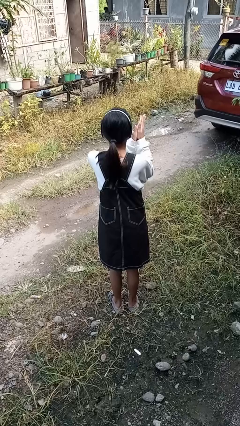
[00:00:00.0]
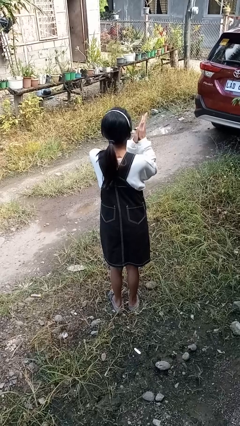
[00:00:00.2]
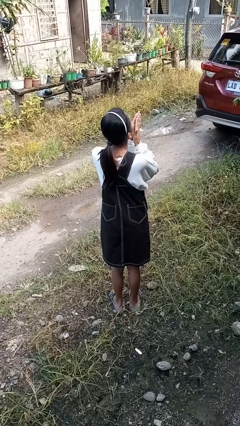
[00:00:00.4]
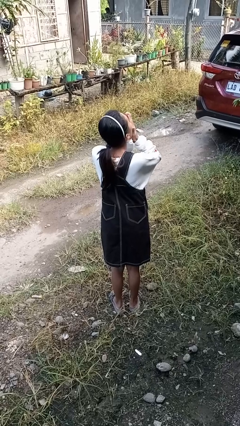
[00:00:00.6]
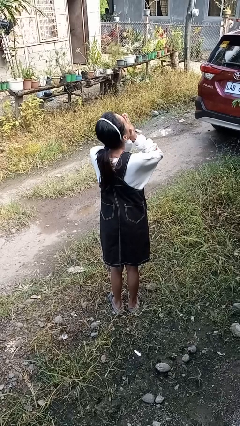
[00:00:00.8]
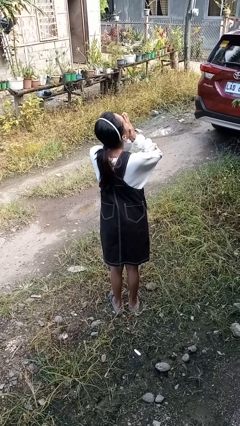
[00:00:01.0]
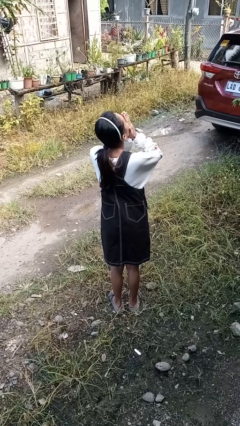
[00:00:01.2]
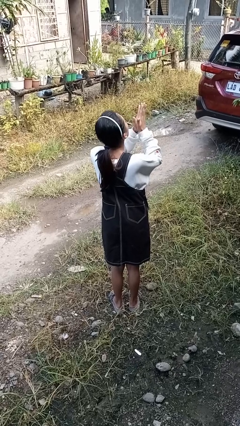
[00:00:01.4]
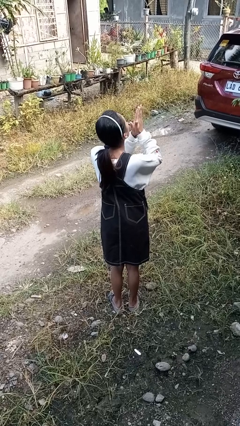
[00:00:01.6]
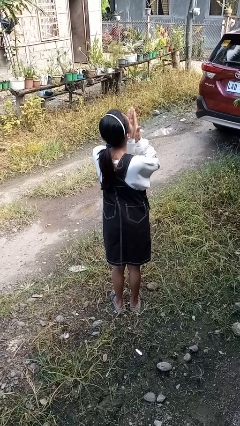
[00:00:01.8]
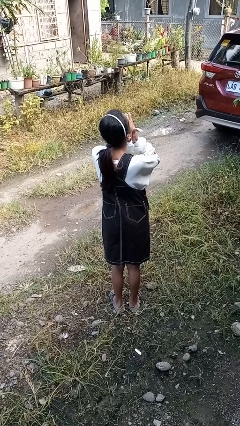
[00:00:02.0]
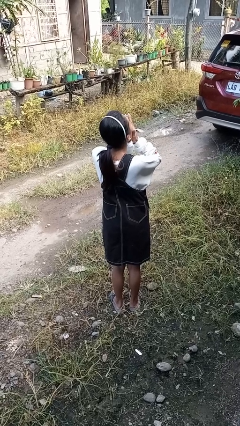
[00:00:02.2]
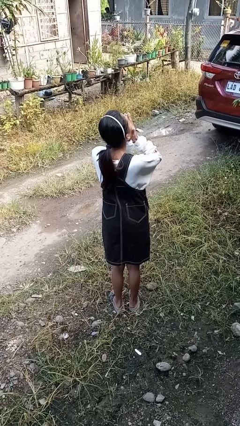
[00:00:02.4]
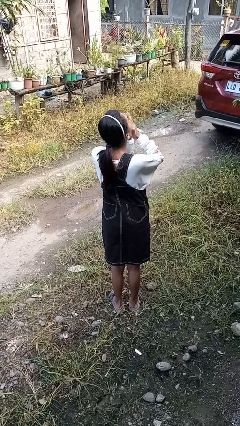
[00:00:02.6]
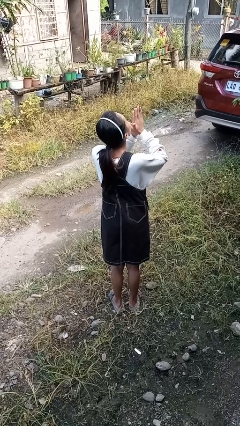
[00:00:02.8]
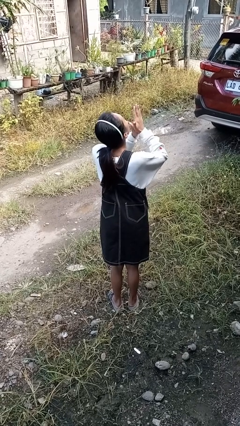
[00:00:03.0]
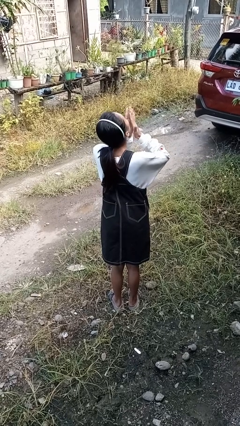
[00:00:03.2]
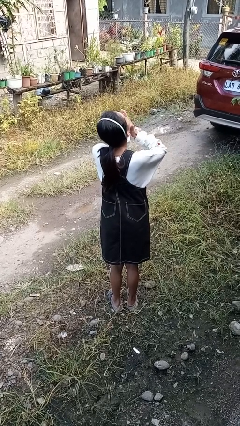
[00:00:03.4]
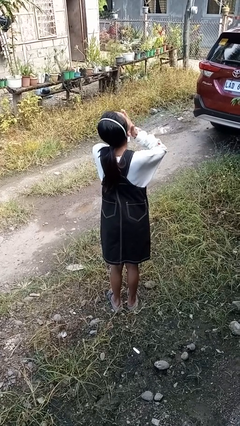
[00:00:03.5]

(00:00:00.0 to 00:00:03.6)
person blows into hands

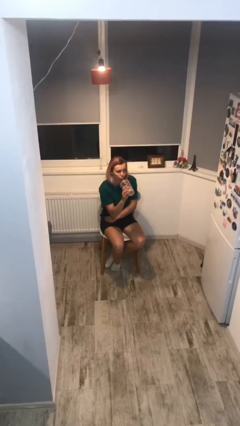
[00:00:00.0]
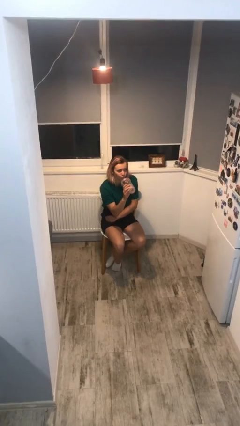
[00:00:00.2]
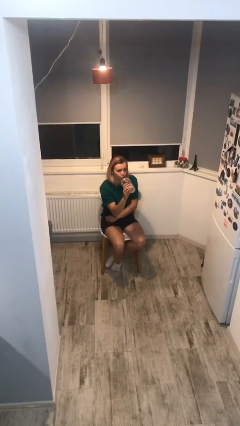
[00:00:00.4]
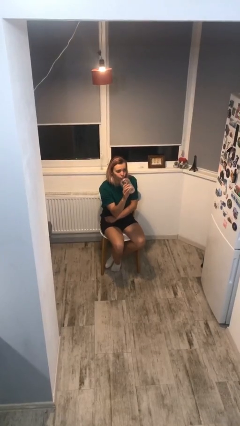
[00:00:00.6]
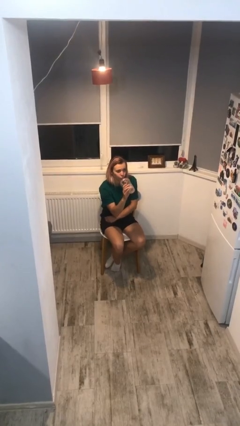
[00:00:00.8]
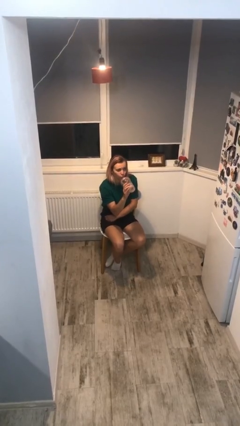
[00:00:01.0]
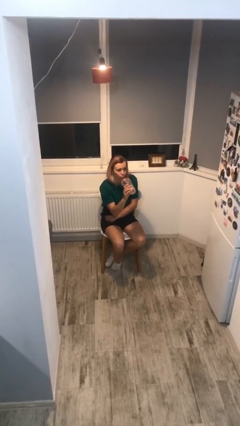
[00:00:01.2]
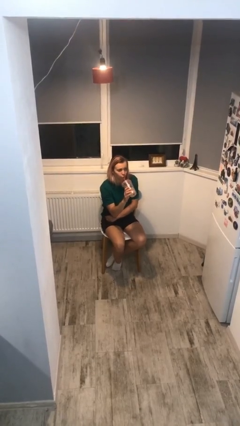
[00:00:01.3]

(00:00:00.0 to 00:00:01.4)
person drinks from straw

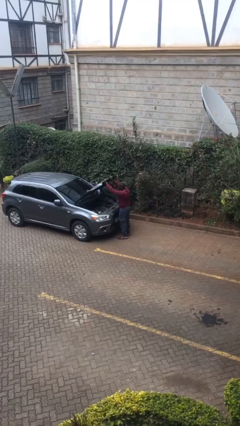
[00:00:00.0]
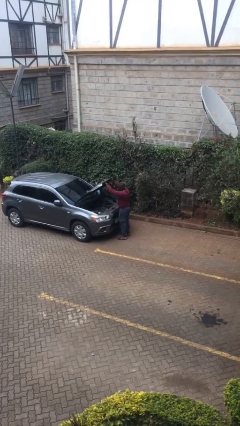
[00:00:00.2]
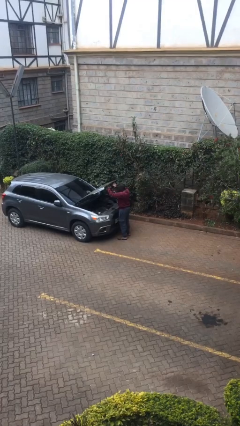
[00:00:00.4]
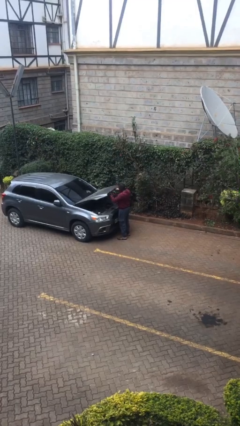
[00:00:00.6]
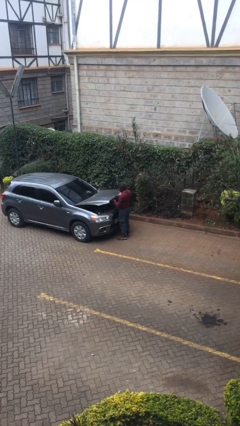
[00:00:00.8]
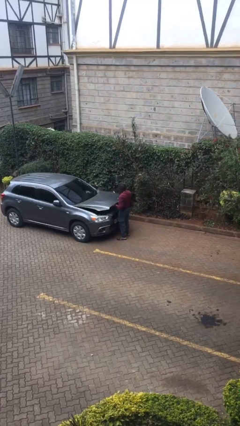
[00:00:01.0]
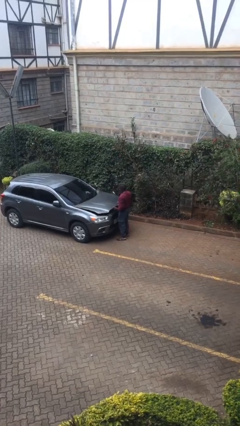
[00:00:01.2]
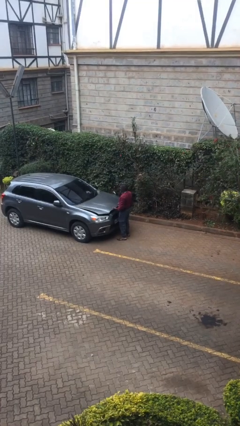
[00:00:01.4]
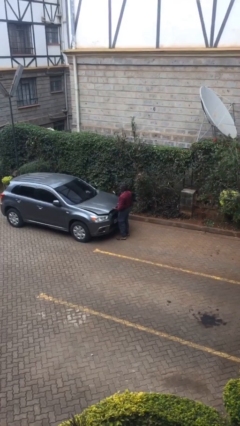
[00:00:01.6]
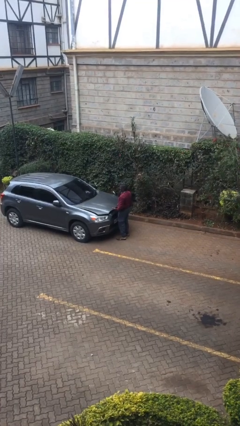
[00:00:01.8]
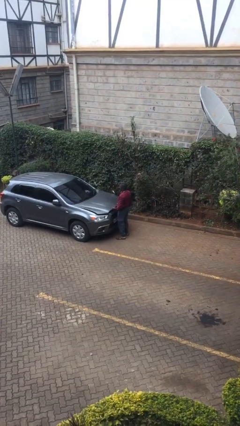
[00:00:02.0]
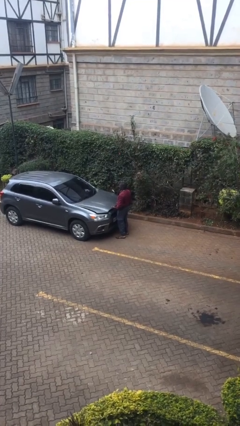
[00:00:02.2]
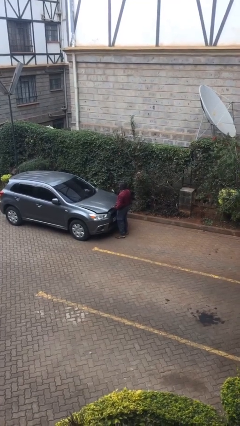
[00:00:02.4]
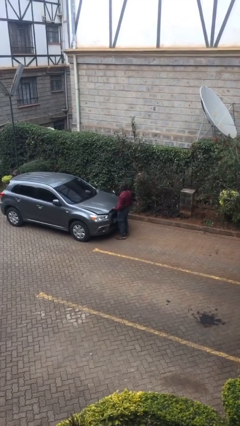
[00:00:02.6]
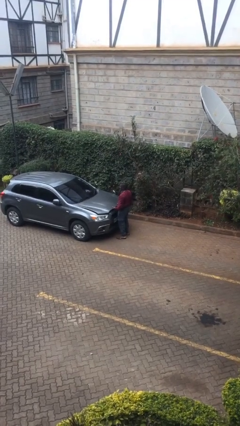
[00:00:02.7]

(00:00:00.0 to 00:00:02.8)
person closes car hood

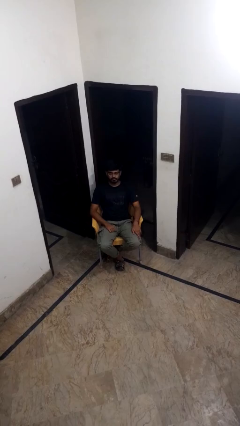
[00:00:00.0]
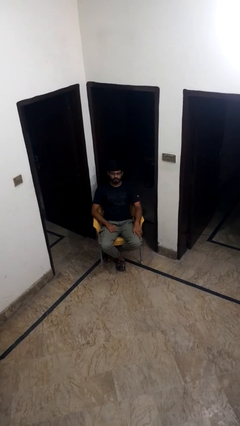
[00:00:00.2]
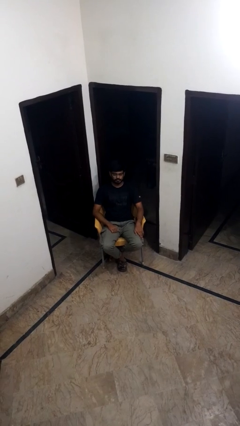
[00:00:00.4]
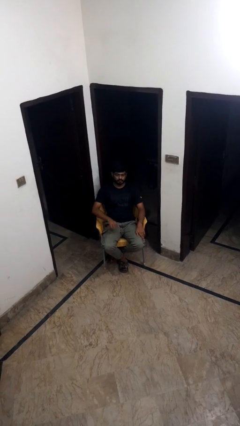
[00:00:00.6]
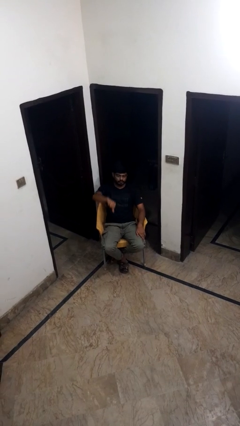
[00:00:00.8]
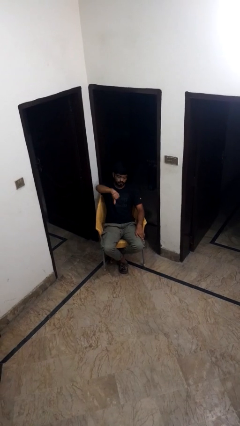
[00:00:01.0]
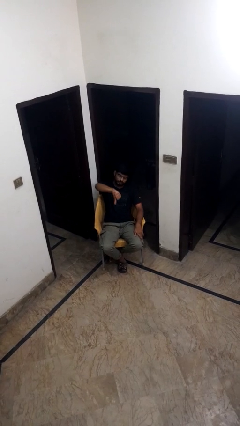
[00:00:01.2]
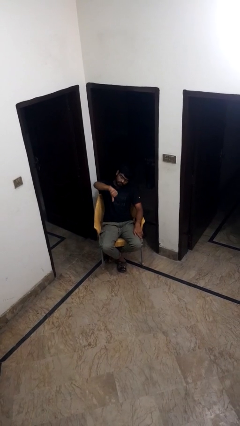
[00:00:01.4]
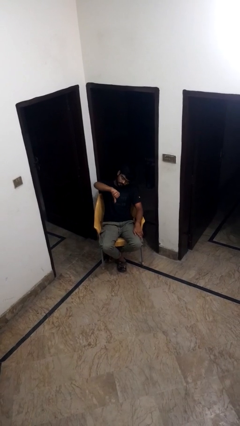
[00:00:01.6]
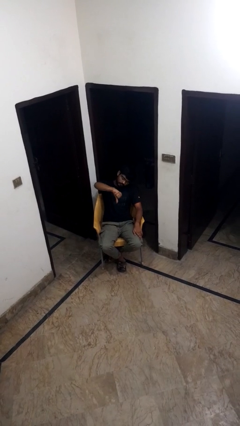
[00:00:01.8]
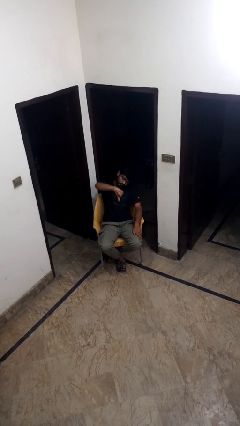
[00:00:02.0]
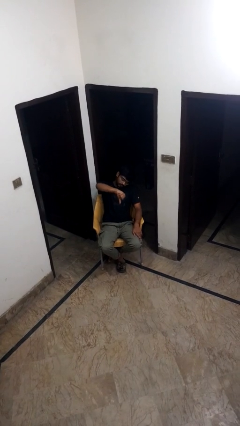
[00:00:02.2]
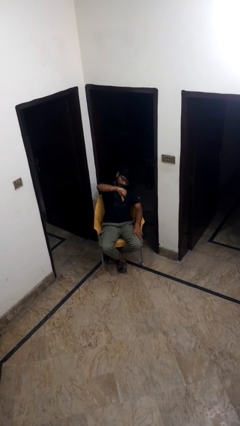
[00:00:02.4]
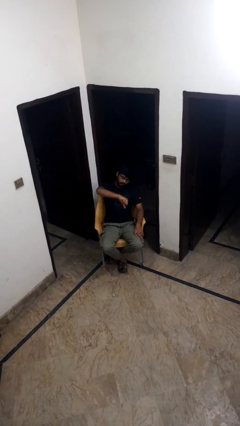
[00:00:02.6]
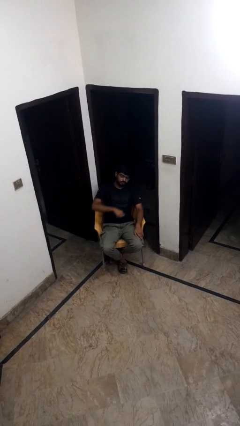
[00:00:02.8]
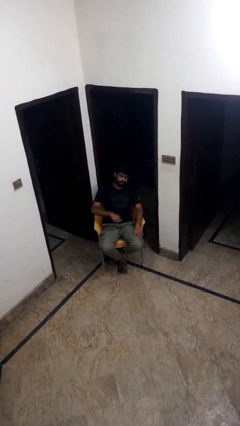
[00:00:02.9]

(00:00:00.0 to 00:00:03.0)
person gestures thumbs down

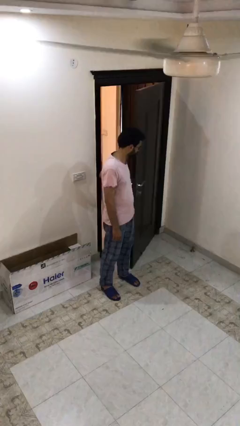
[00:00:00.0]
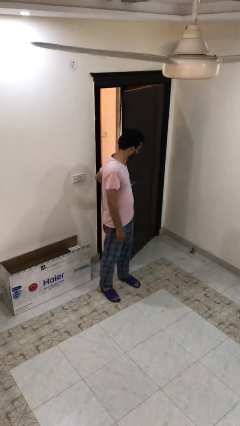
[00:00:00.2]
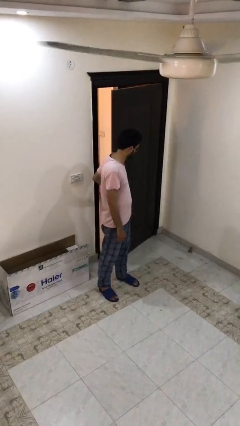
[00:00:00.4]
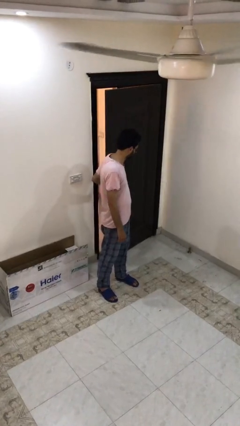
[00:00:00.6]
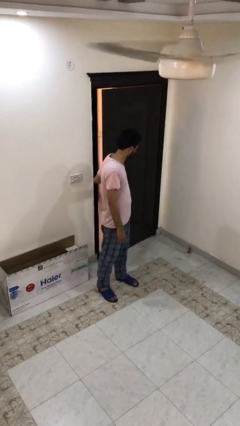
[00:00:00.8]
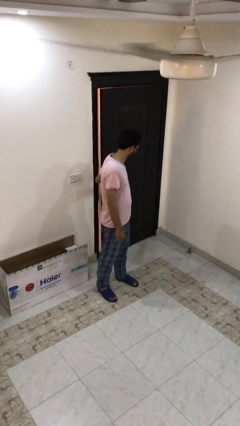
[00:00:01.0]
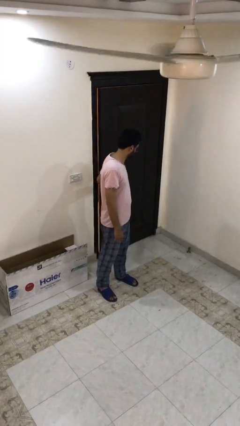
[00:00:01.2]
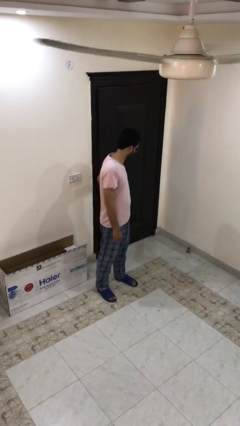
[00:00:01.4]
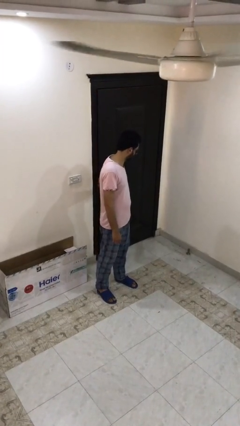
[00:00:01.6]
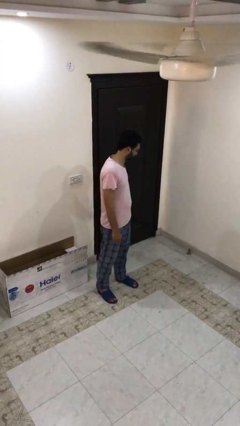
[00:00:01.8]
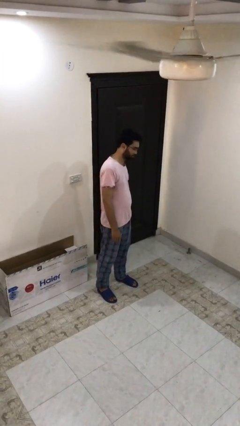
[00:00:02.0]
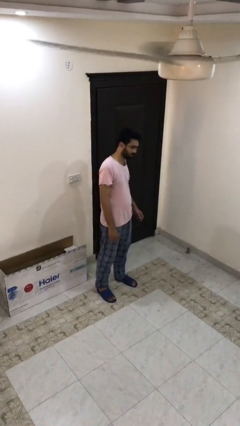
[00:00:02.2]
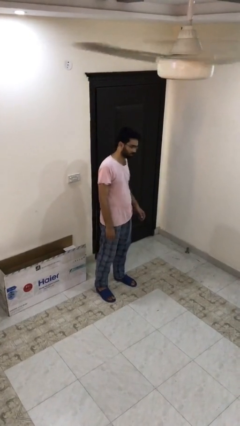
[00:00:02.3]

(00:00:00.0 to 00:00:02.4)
person closes facility door

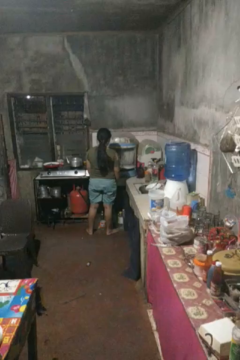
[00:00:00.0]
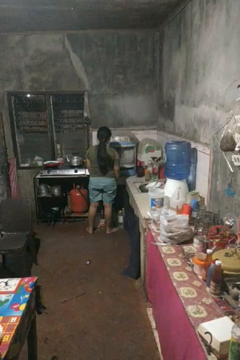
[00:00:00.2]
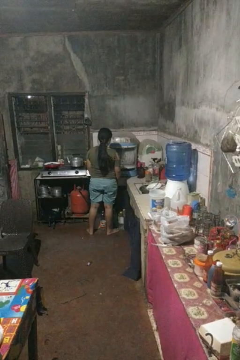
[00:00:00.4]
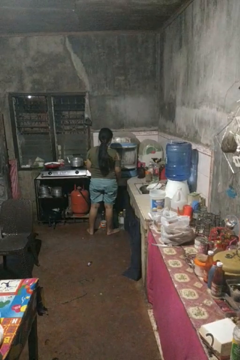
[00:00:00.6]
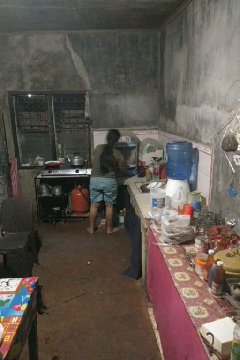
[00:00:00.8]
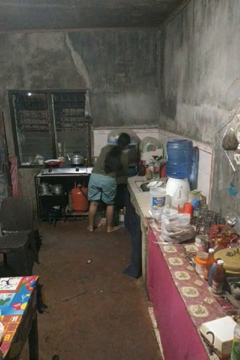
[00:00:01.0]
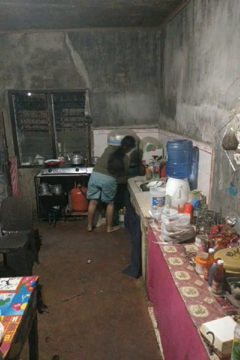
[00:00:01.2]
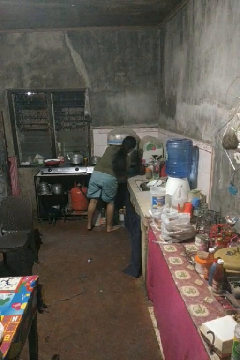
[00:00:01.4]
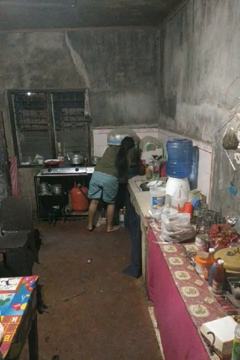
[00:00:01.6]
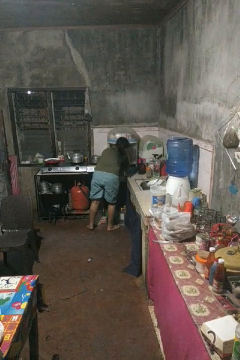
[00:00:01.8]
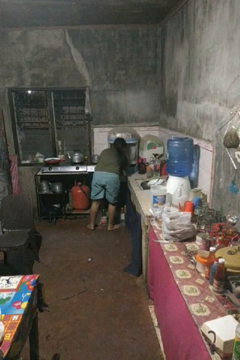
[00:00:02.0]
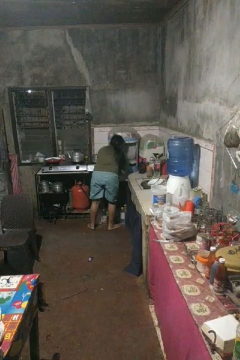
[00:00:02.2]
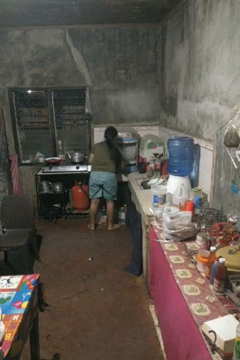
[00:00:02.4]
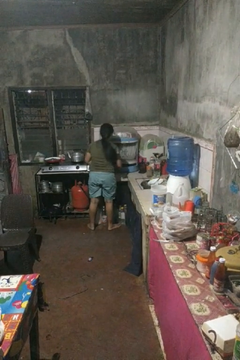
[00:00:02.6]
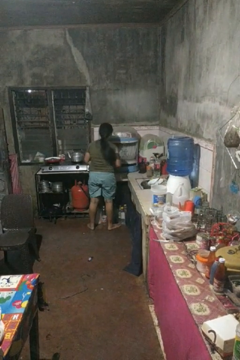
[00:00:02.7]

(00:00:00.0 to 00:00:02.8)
person searches in kitchen drawer

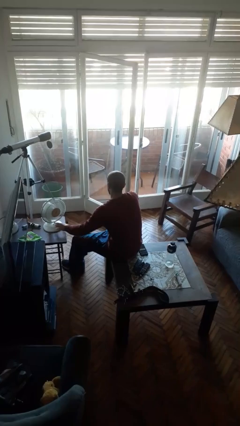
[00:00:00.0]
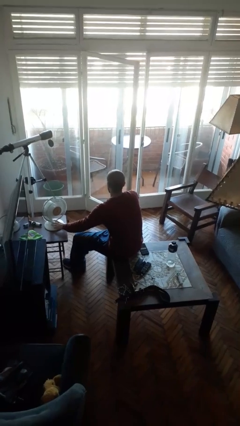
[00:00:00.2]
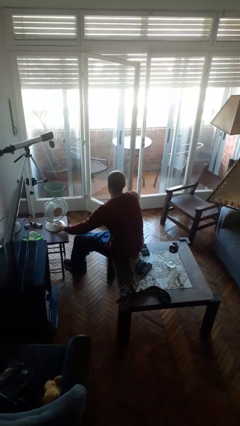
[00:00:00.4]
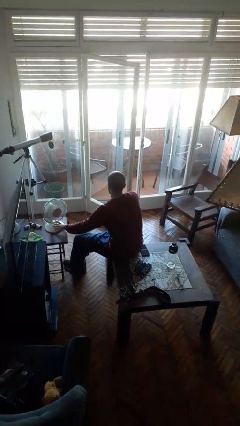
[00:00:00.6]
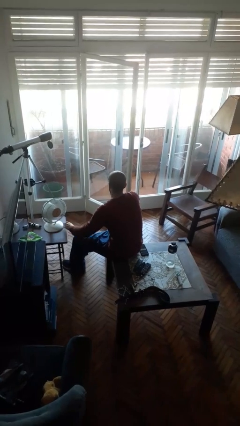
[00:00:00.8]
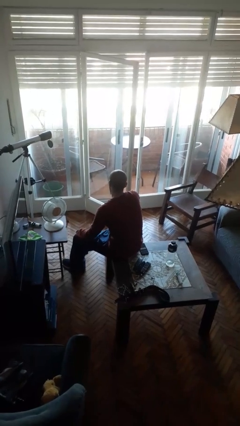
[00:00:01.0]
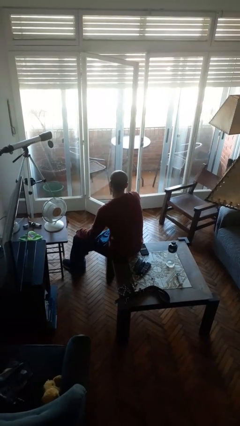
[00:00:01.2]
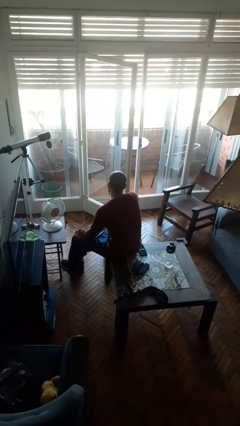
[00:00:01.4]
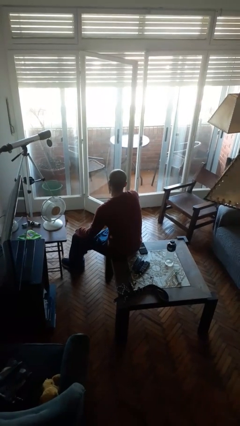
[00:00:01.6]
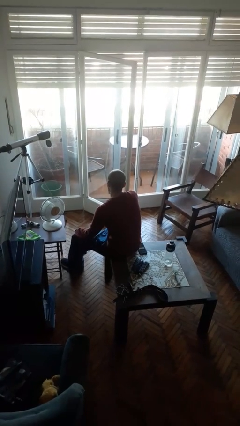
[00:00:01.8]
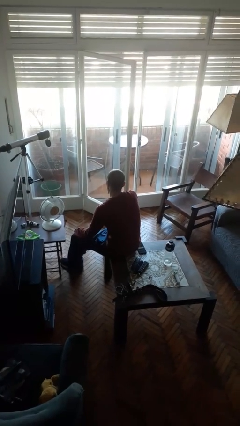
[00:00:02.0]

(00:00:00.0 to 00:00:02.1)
person turns off fan
